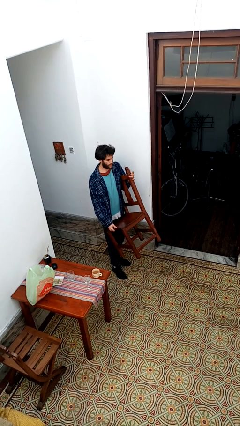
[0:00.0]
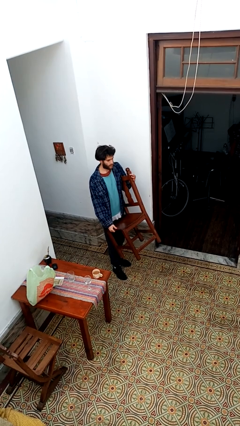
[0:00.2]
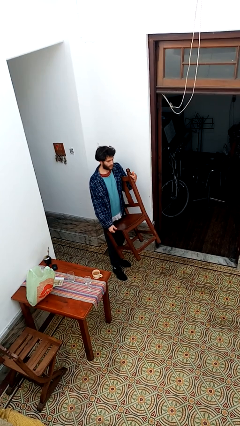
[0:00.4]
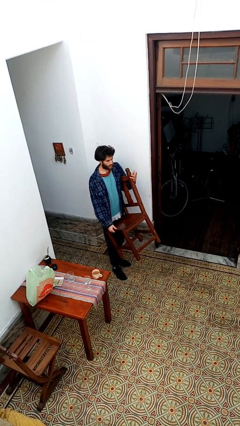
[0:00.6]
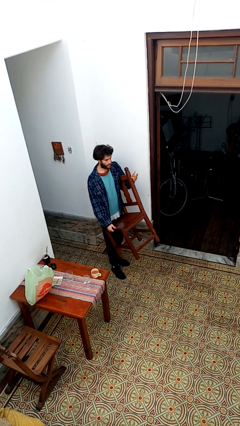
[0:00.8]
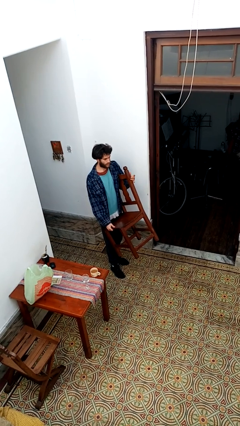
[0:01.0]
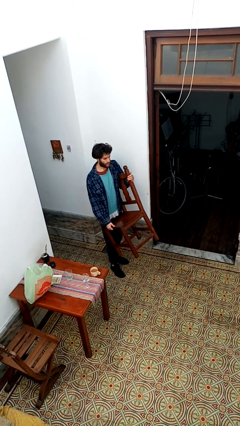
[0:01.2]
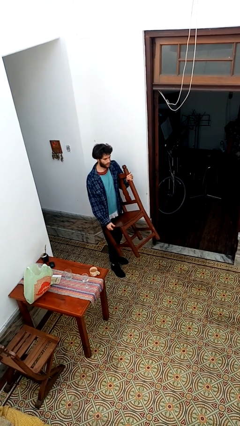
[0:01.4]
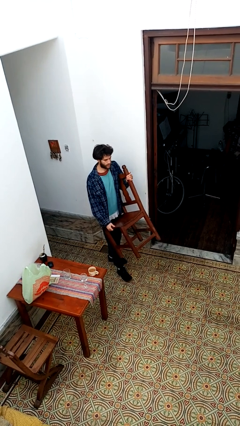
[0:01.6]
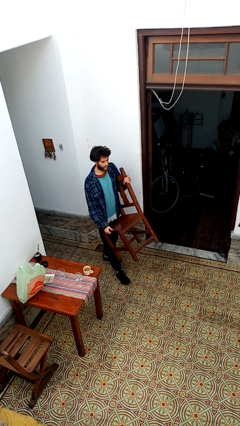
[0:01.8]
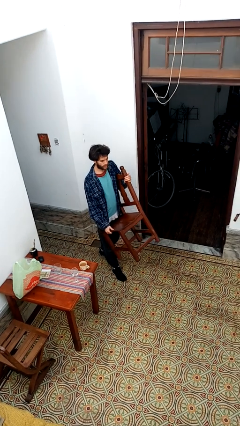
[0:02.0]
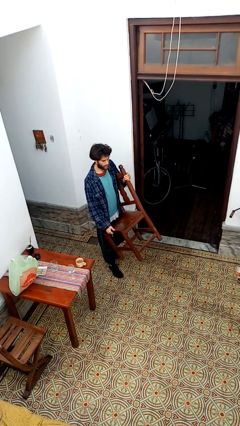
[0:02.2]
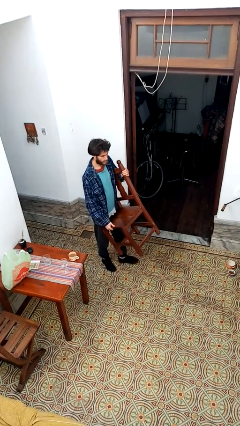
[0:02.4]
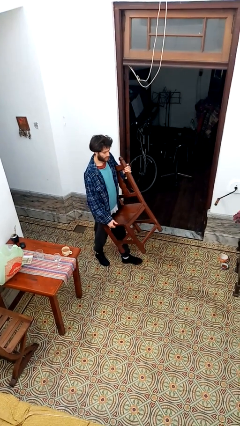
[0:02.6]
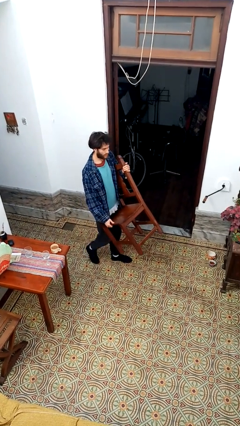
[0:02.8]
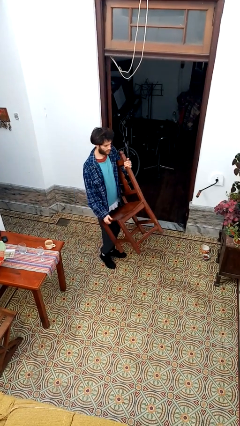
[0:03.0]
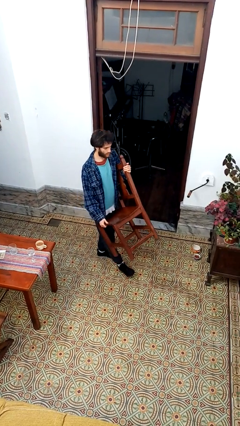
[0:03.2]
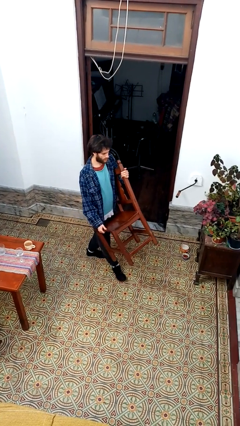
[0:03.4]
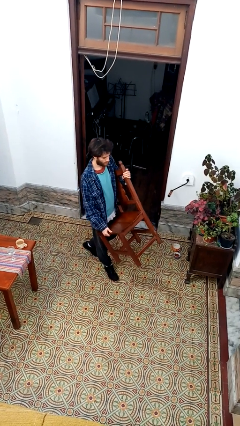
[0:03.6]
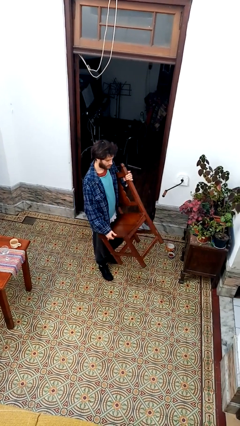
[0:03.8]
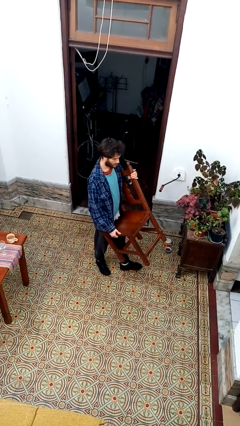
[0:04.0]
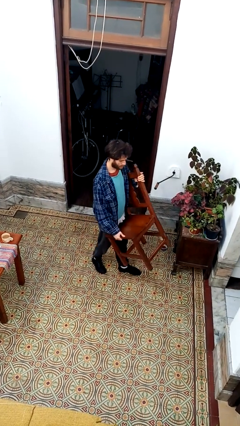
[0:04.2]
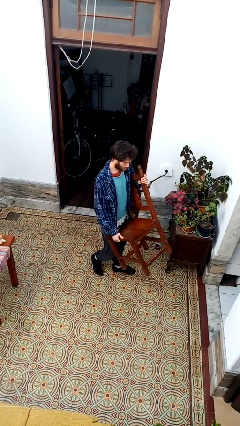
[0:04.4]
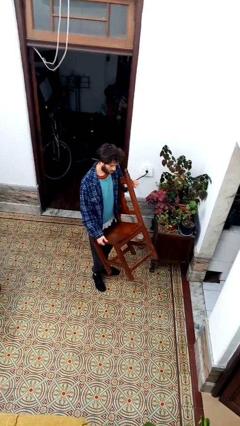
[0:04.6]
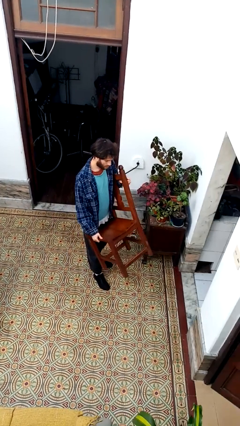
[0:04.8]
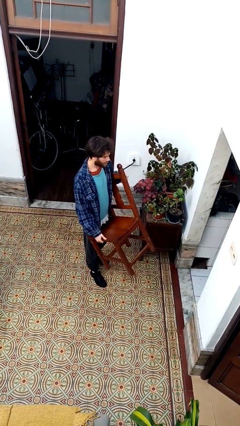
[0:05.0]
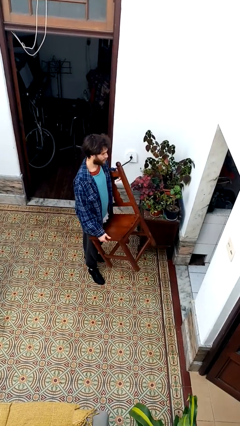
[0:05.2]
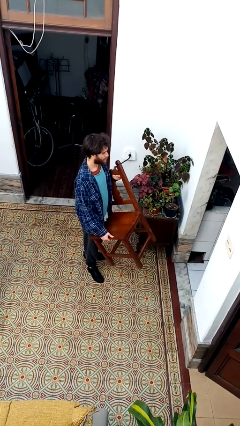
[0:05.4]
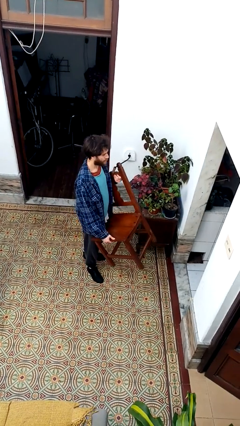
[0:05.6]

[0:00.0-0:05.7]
person carries furniture

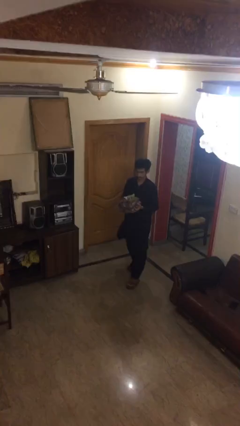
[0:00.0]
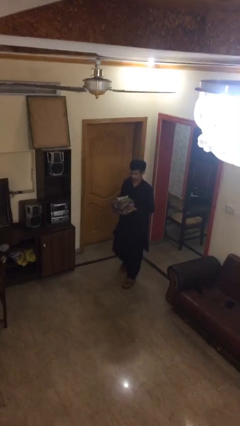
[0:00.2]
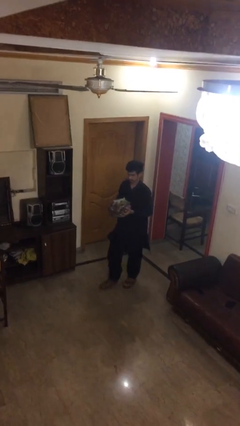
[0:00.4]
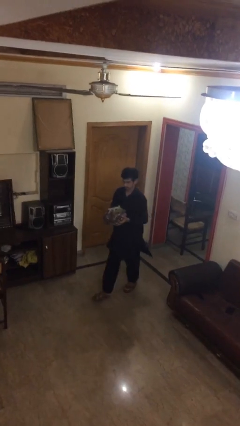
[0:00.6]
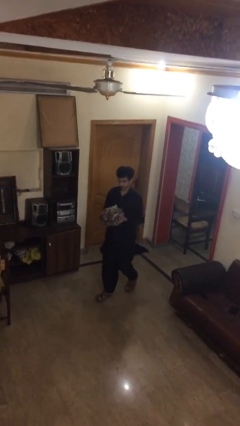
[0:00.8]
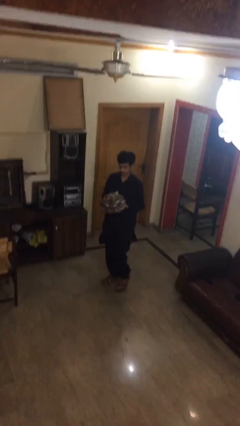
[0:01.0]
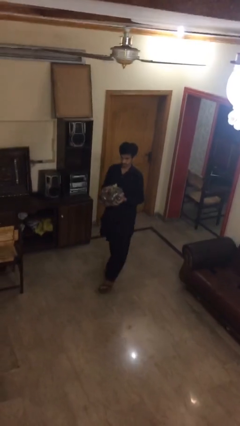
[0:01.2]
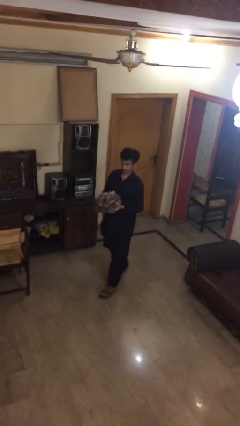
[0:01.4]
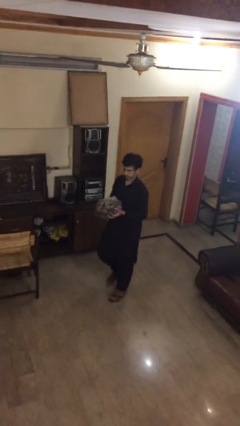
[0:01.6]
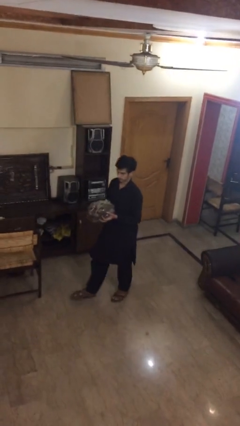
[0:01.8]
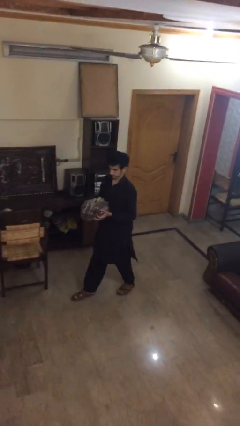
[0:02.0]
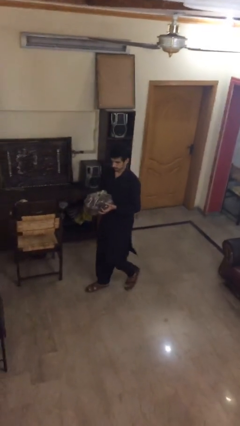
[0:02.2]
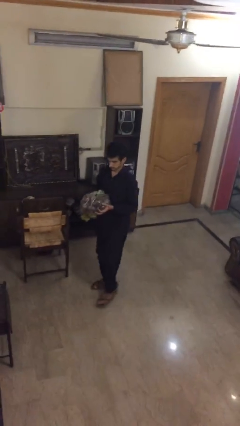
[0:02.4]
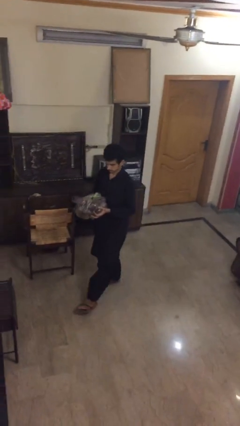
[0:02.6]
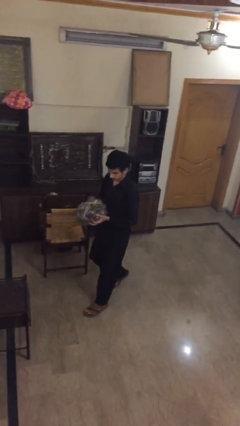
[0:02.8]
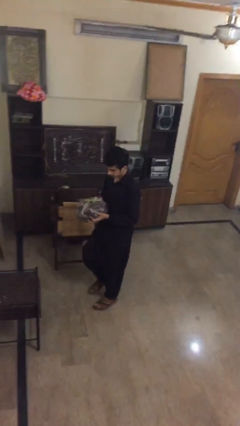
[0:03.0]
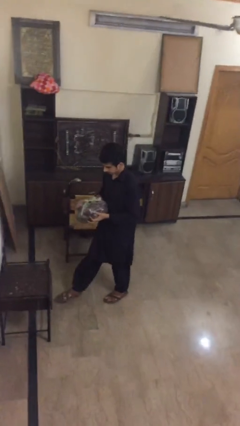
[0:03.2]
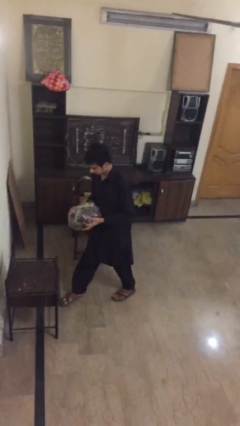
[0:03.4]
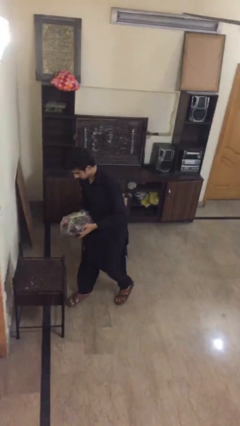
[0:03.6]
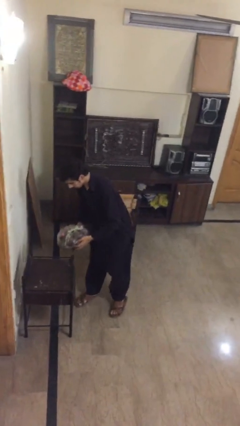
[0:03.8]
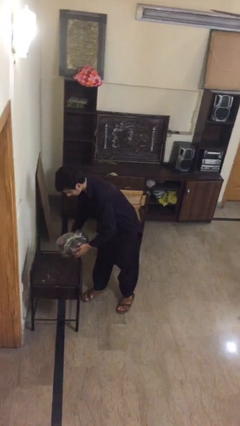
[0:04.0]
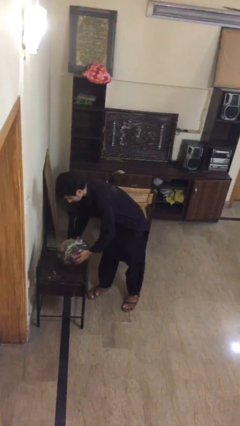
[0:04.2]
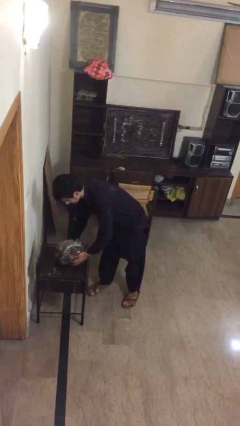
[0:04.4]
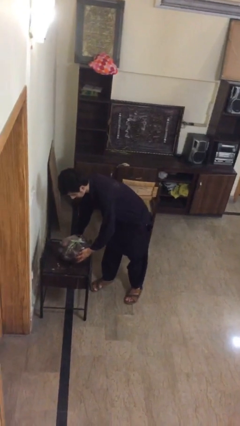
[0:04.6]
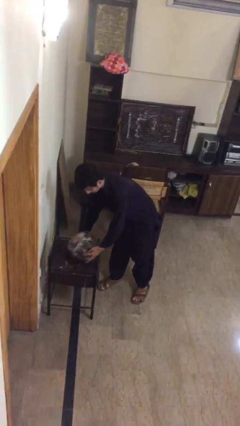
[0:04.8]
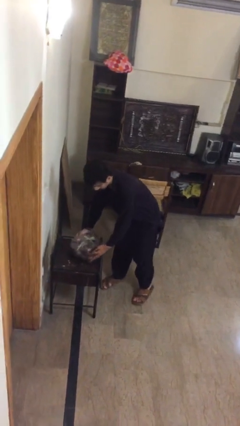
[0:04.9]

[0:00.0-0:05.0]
person puts down object on table

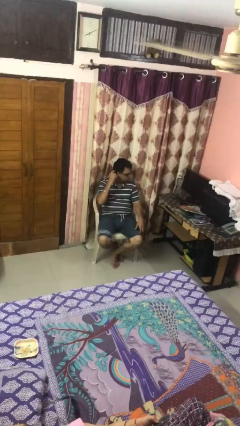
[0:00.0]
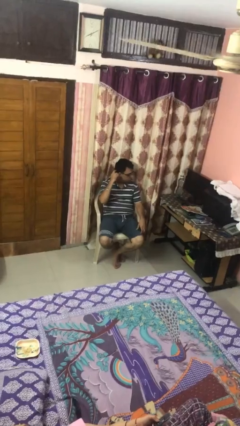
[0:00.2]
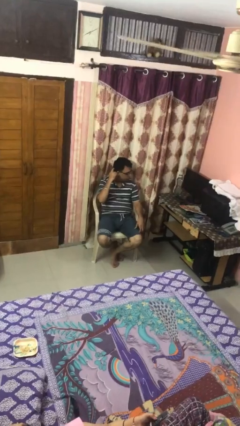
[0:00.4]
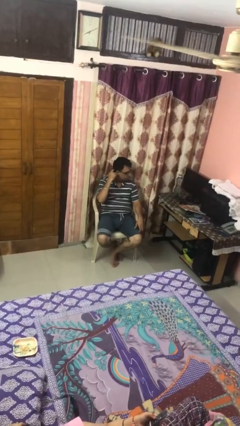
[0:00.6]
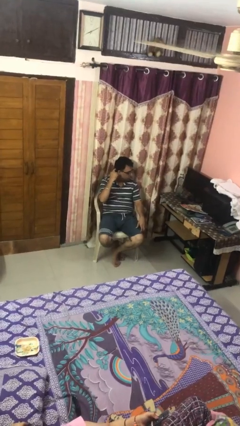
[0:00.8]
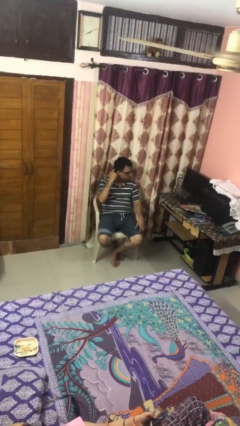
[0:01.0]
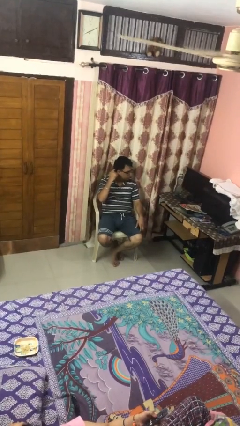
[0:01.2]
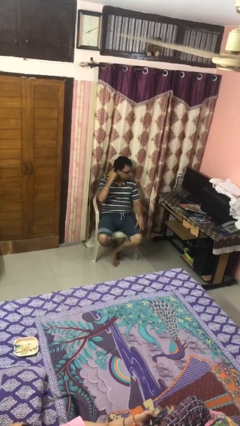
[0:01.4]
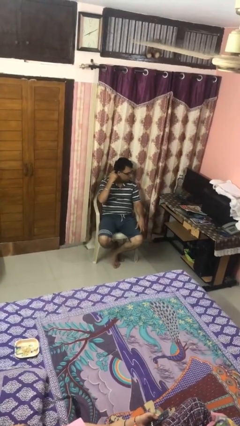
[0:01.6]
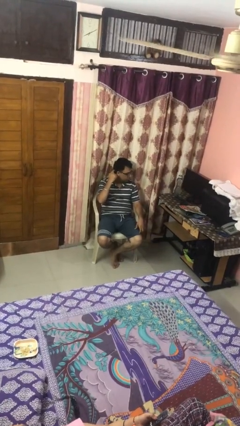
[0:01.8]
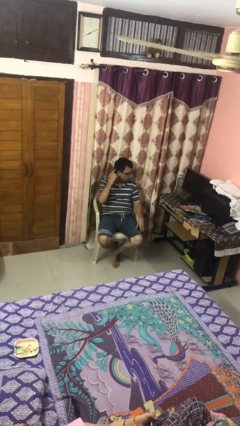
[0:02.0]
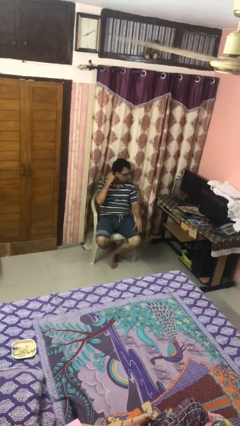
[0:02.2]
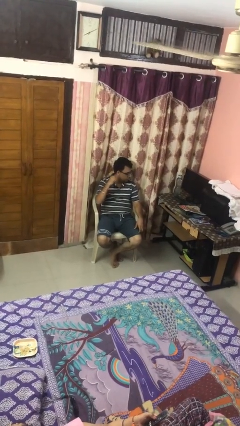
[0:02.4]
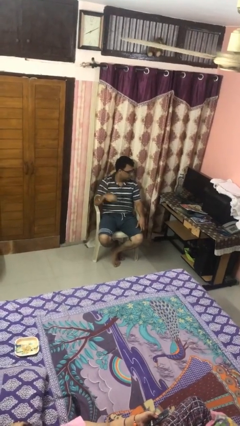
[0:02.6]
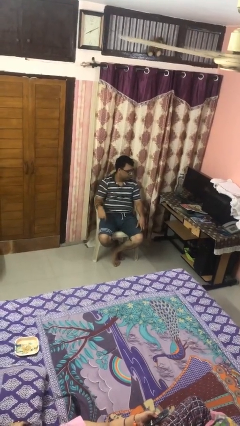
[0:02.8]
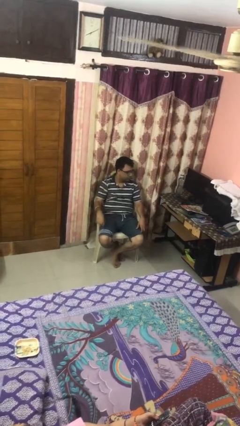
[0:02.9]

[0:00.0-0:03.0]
person scratches face

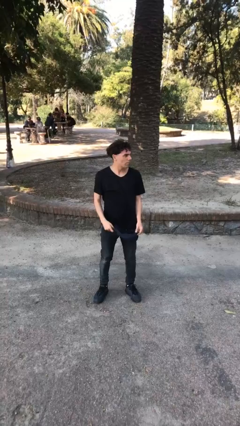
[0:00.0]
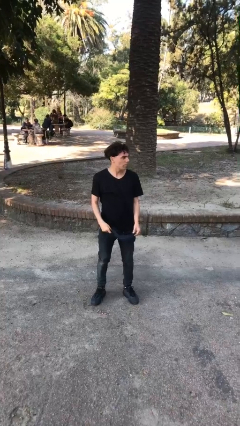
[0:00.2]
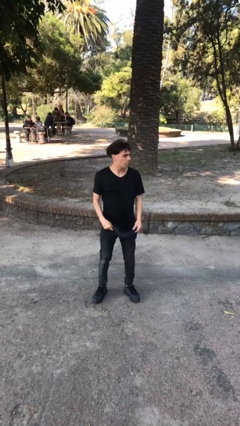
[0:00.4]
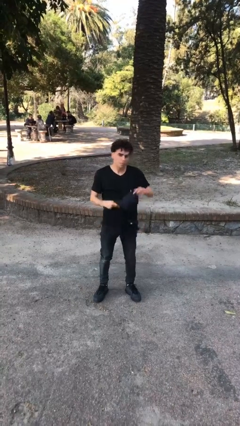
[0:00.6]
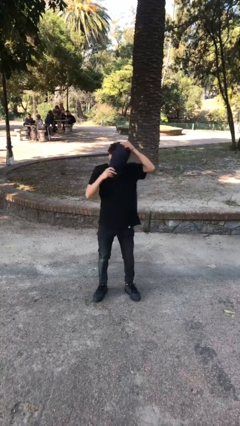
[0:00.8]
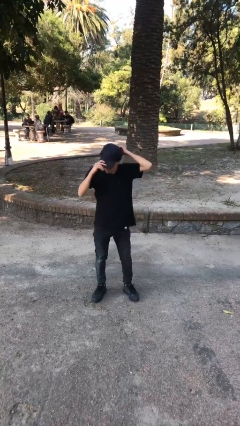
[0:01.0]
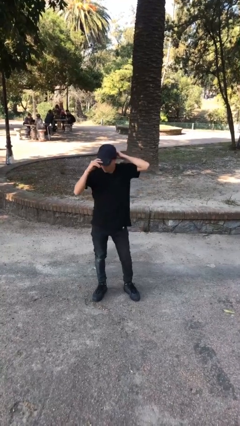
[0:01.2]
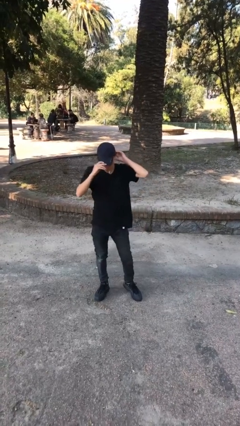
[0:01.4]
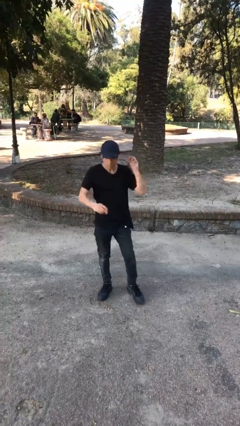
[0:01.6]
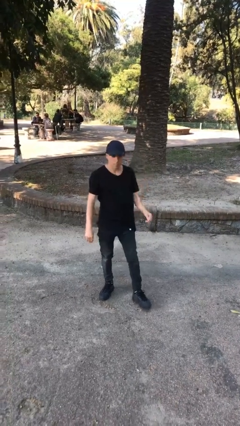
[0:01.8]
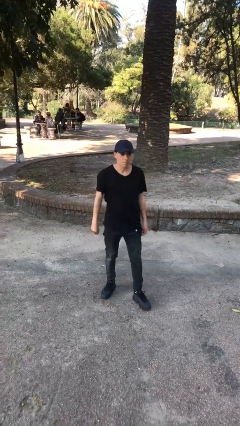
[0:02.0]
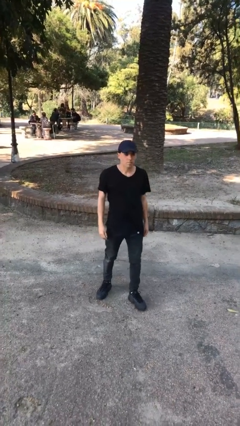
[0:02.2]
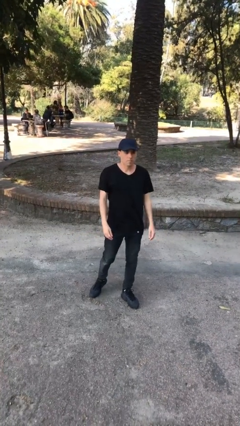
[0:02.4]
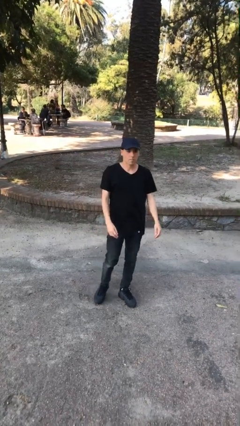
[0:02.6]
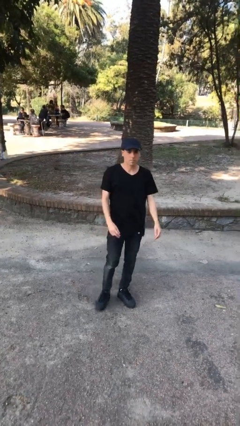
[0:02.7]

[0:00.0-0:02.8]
person puts on hat

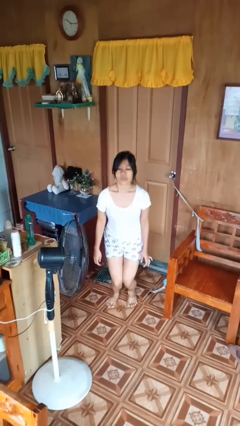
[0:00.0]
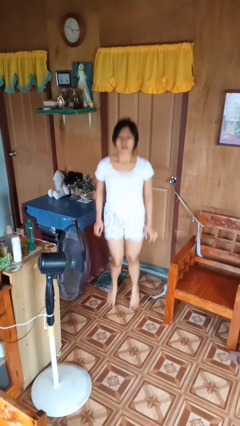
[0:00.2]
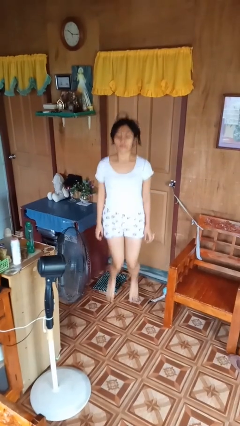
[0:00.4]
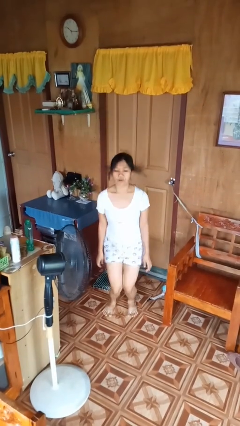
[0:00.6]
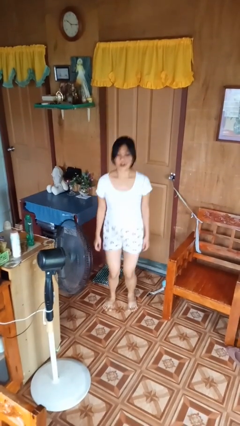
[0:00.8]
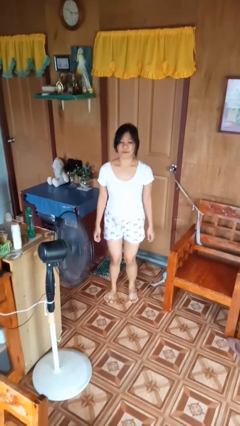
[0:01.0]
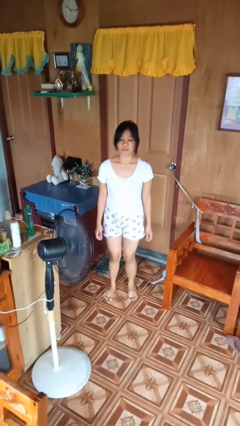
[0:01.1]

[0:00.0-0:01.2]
person jumps
